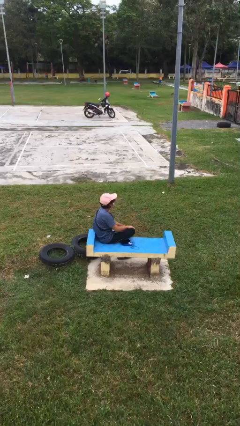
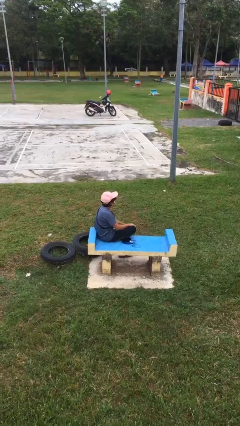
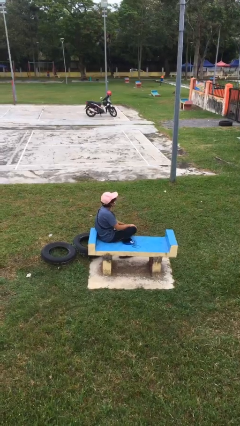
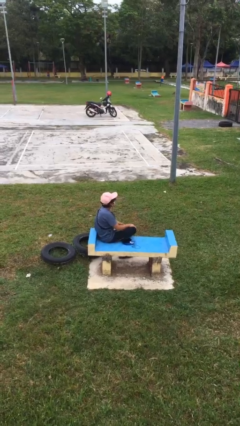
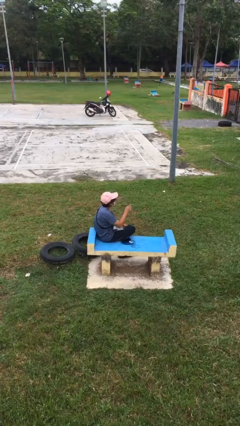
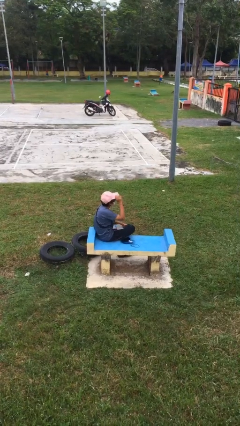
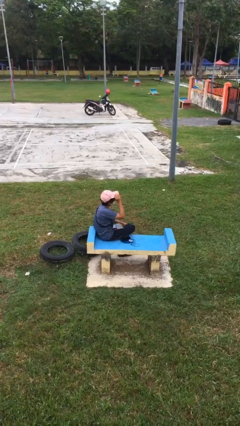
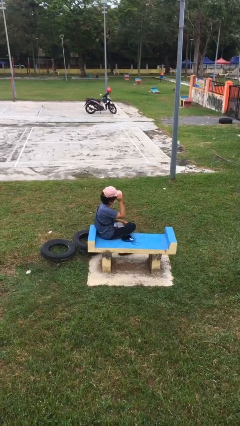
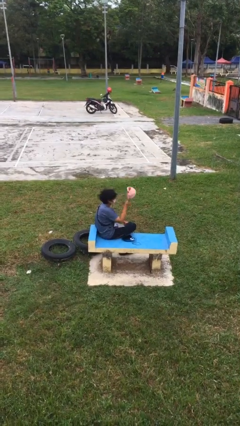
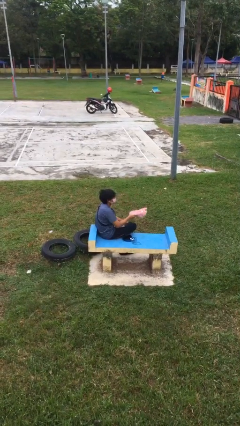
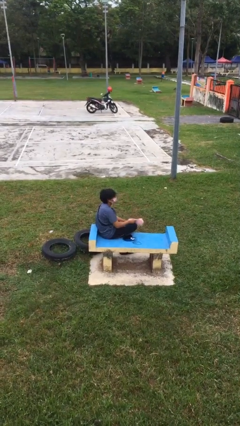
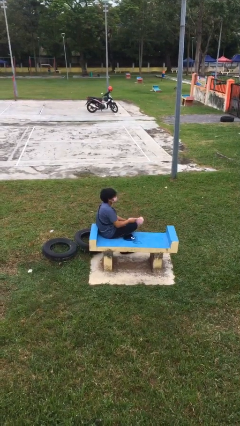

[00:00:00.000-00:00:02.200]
person takes off hat

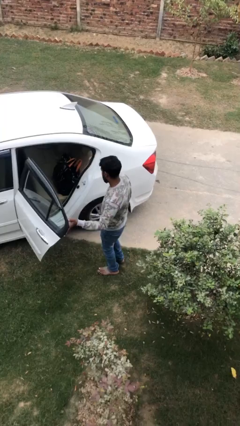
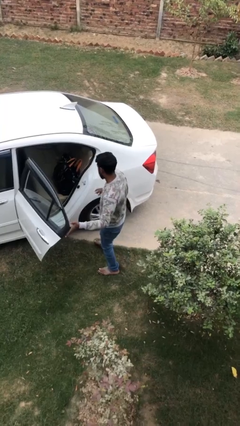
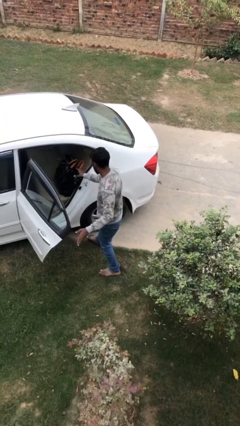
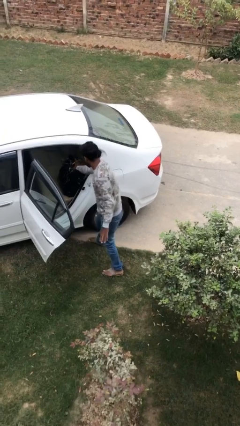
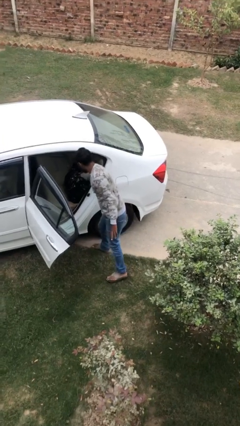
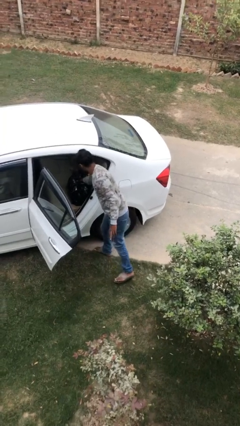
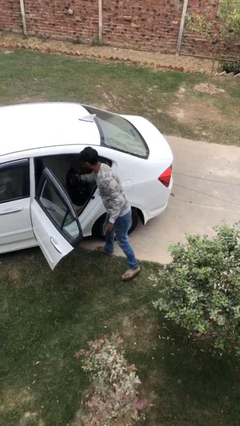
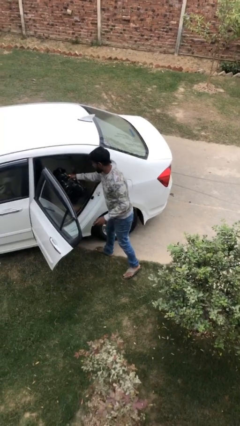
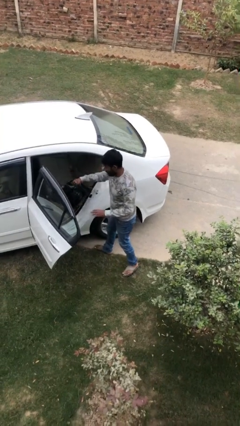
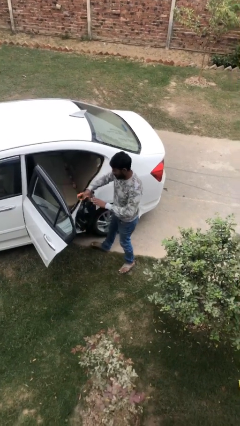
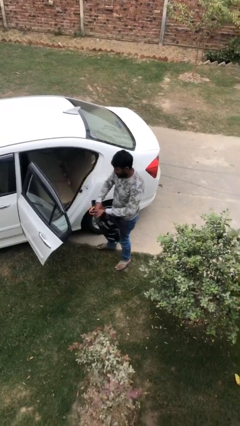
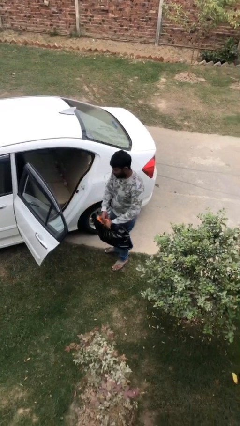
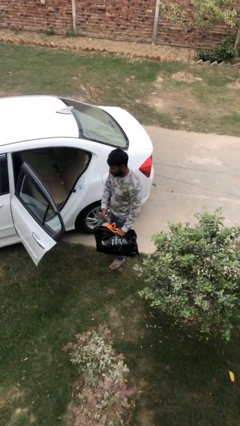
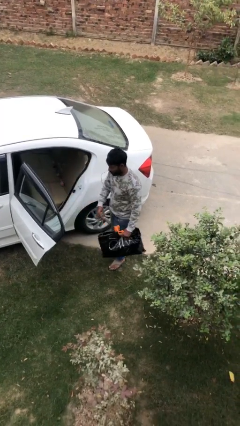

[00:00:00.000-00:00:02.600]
person unloads car

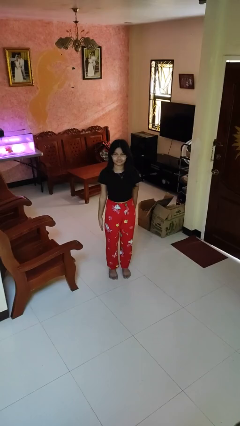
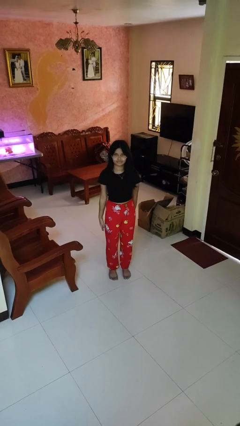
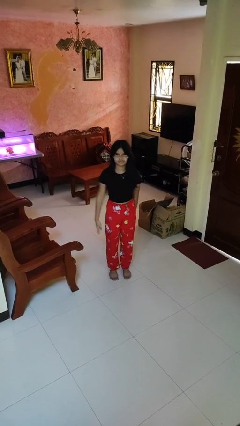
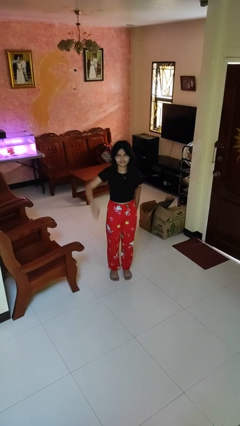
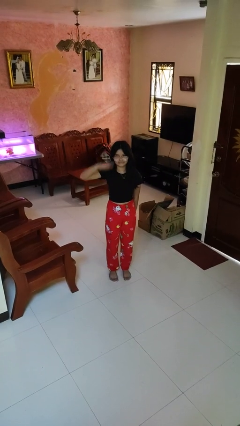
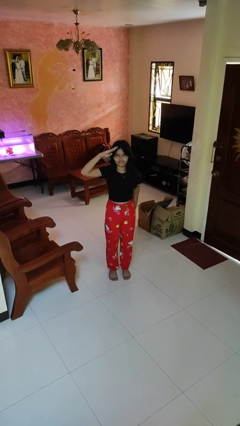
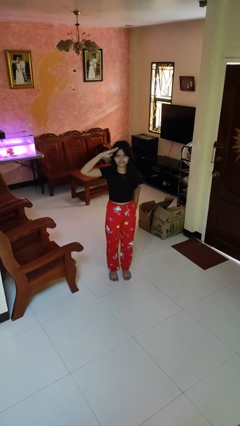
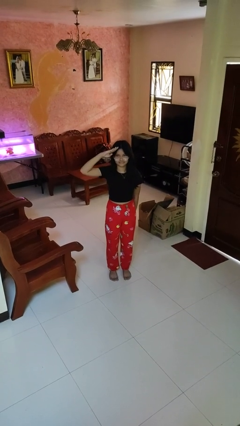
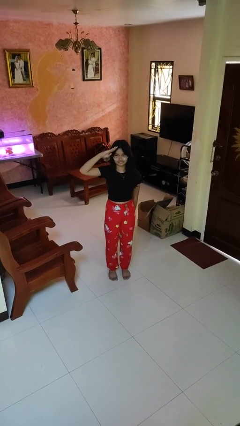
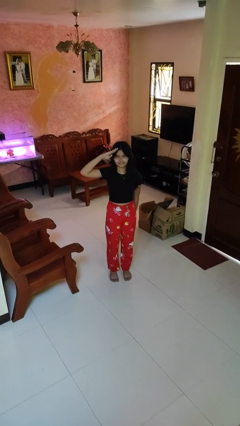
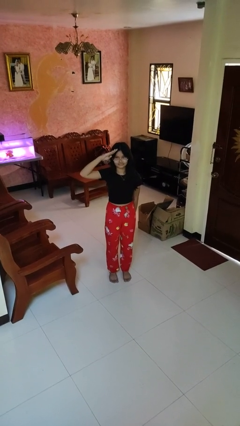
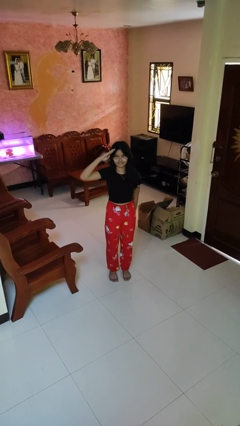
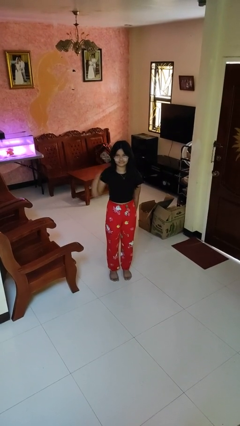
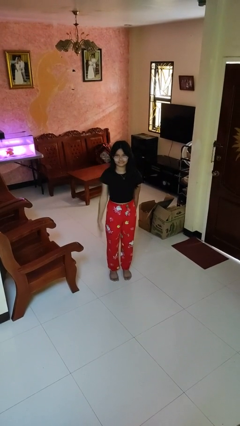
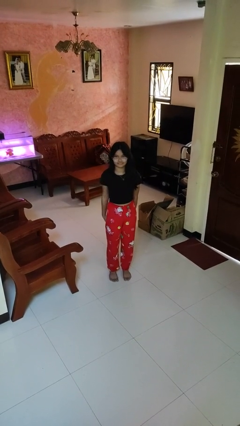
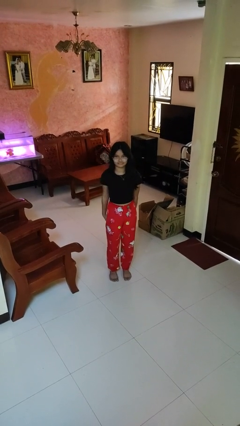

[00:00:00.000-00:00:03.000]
person salutes

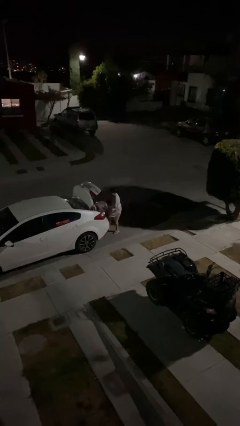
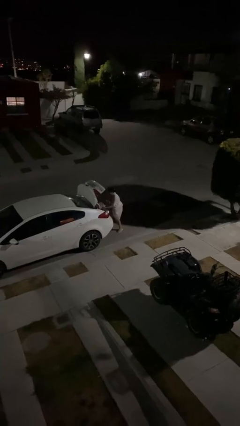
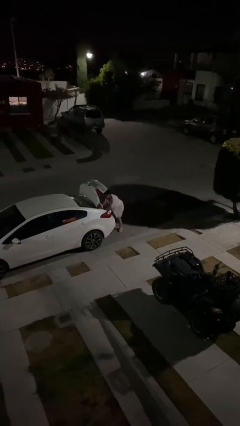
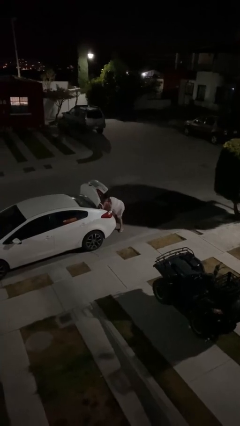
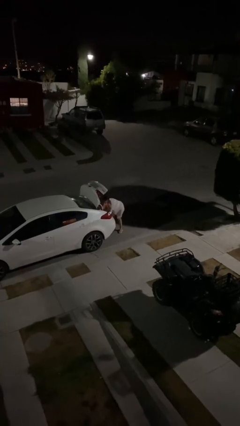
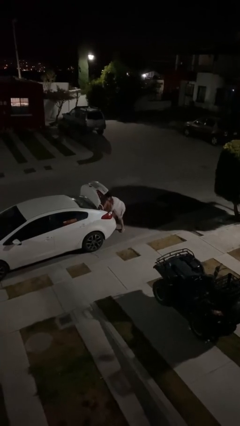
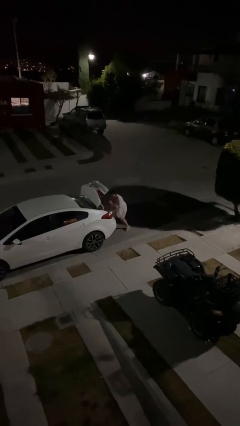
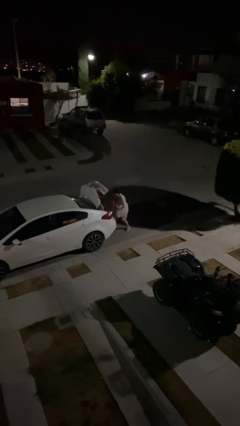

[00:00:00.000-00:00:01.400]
person loads car

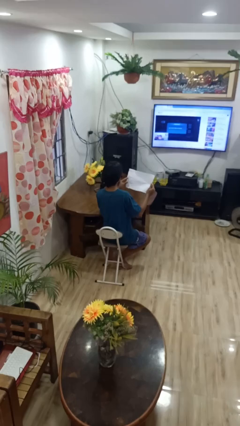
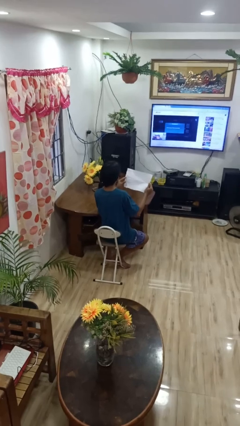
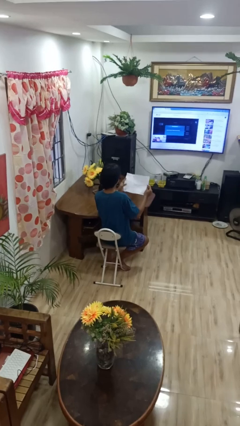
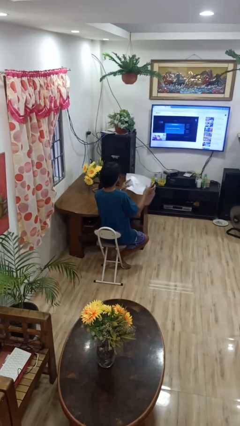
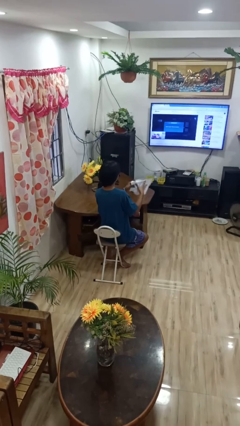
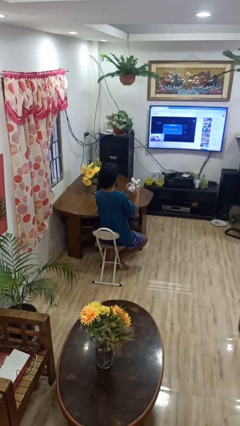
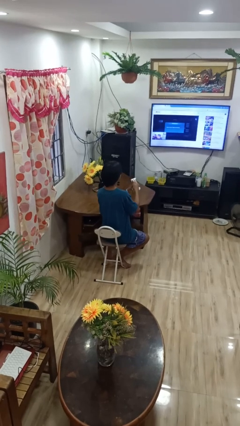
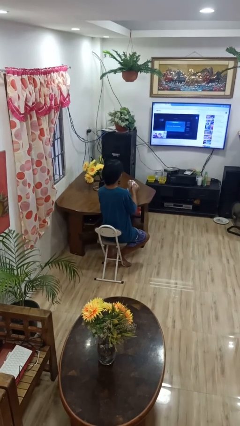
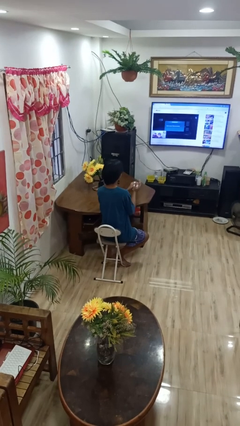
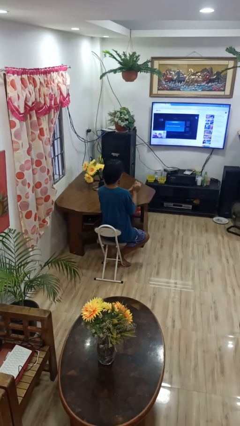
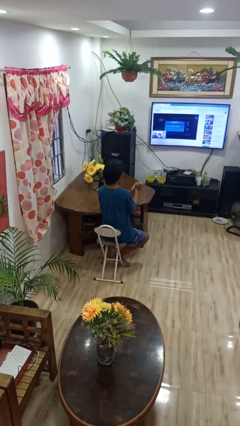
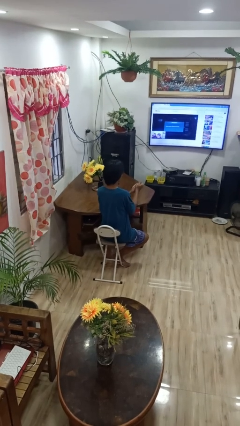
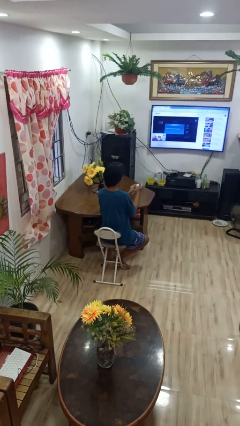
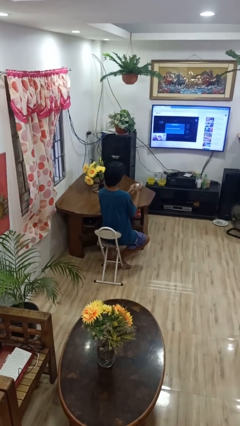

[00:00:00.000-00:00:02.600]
person crumples paper

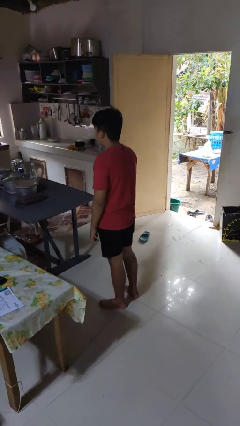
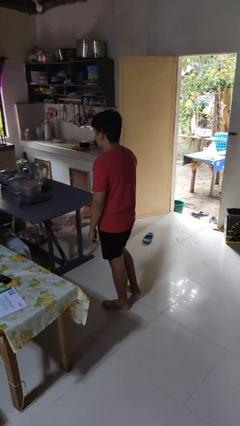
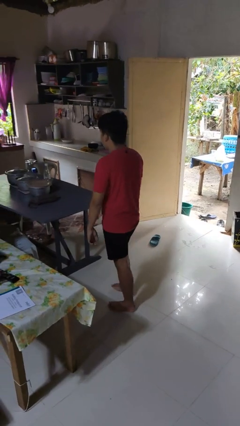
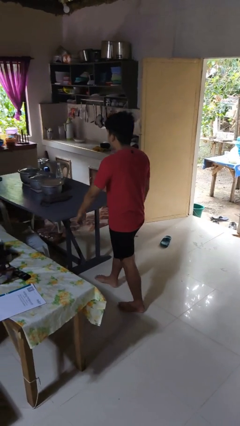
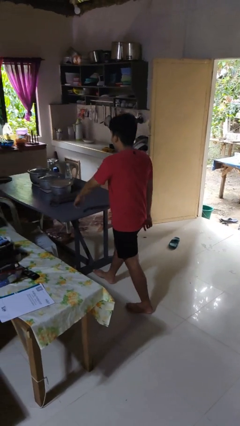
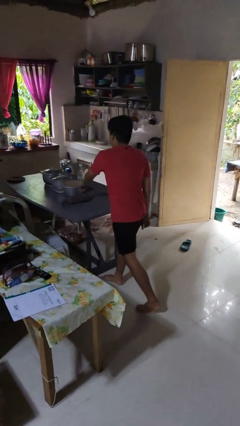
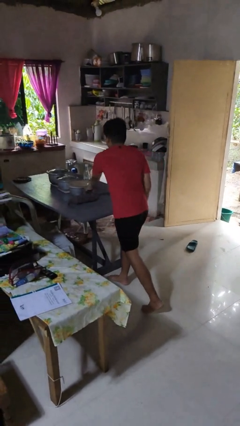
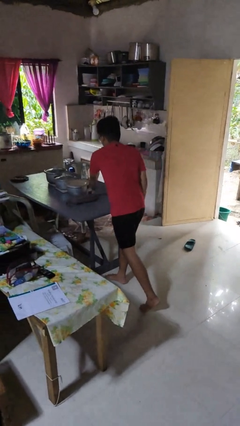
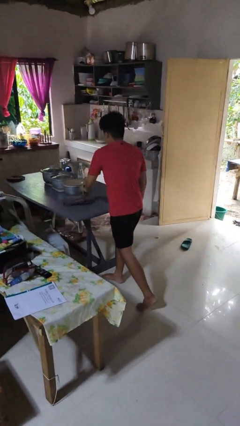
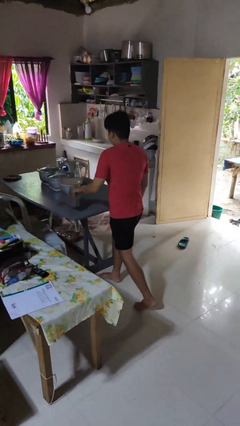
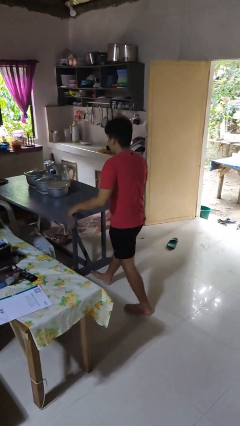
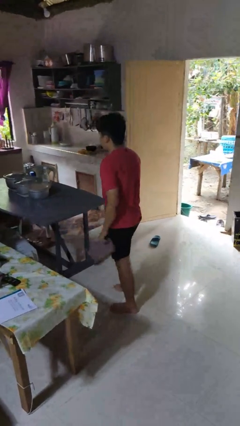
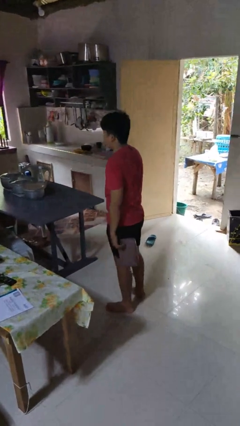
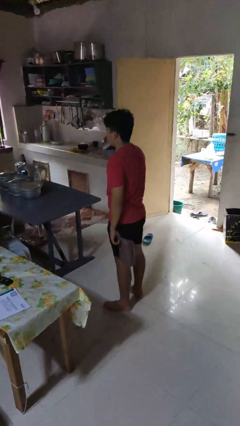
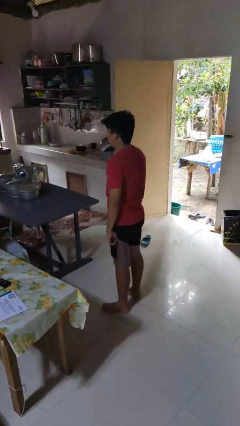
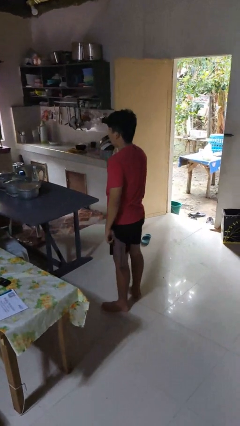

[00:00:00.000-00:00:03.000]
person picks up object from table

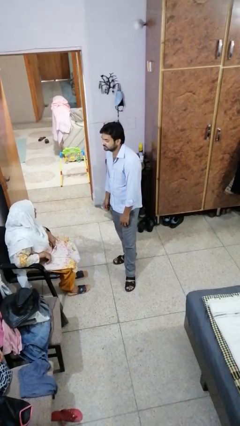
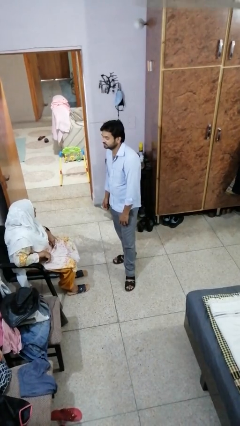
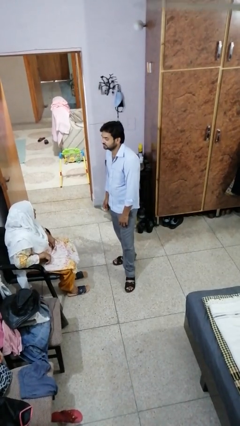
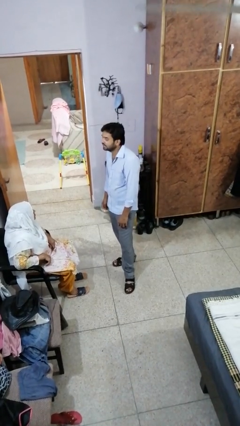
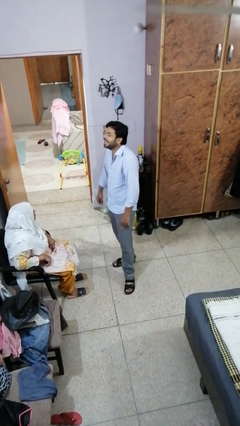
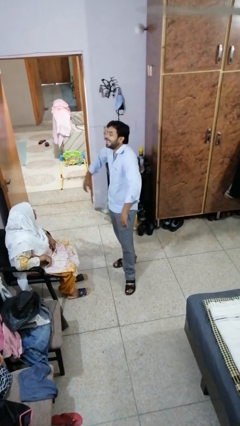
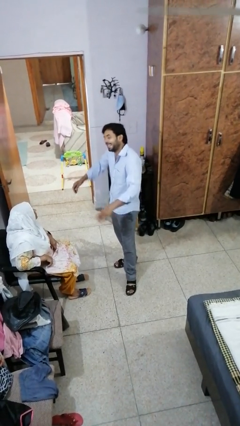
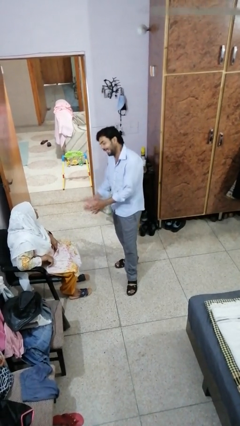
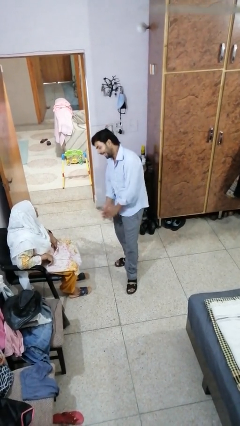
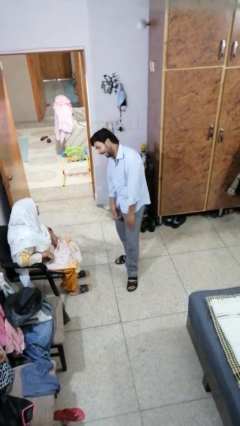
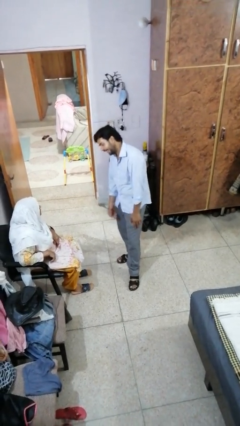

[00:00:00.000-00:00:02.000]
person laughs with person

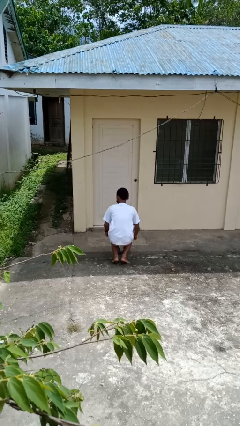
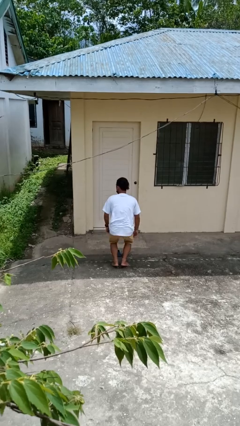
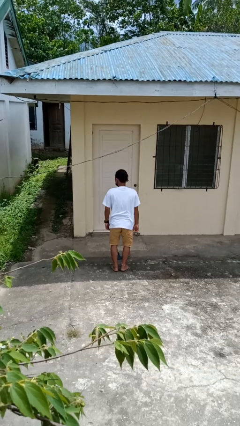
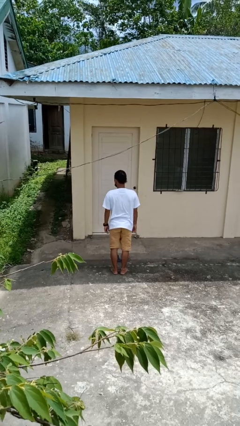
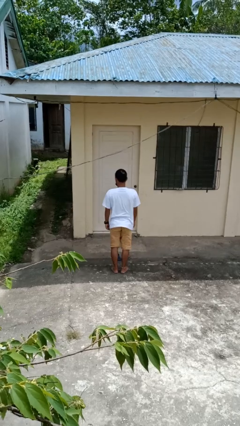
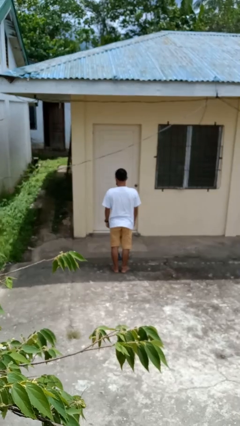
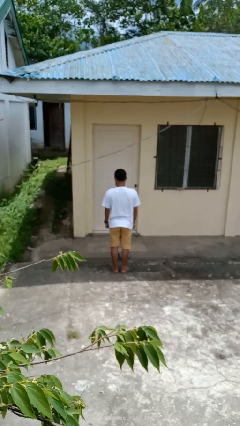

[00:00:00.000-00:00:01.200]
person stands up from floor
